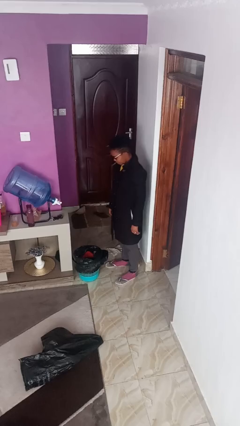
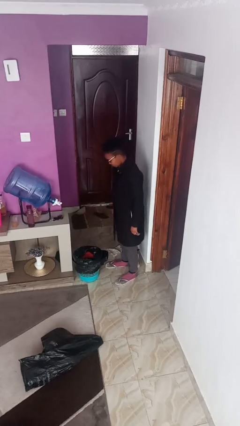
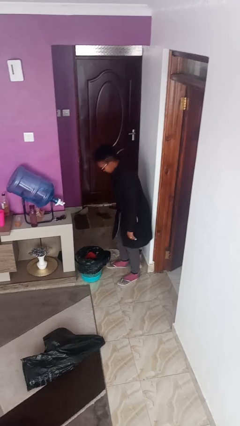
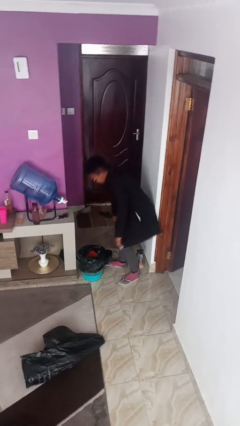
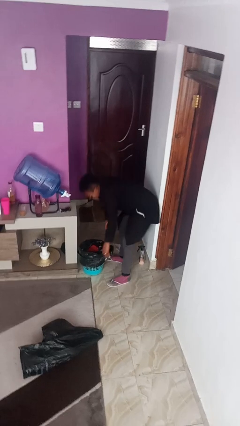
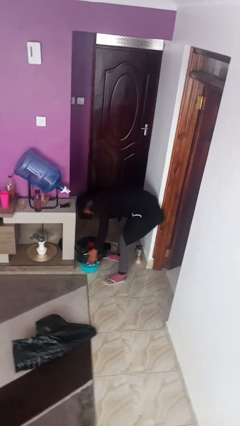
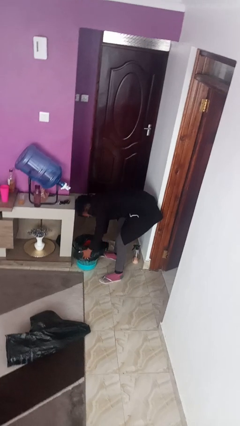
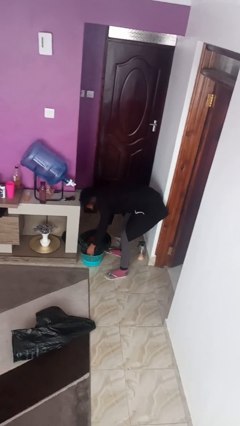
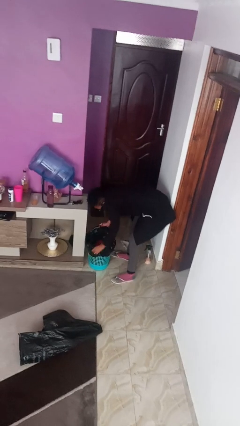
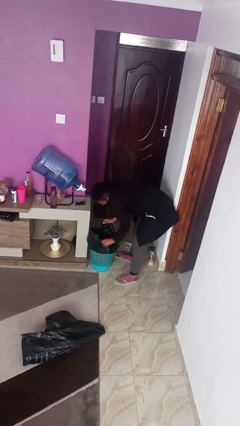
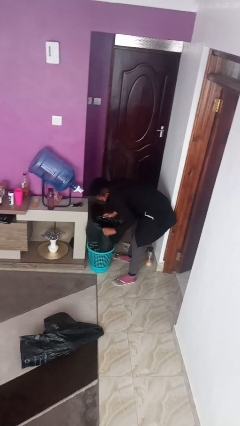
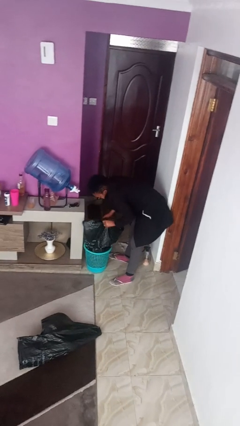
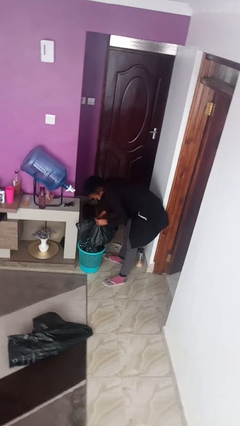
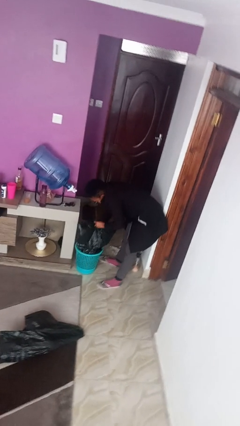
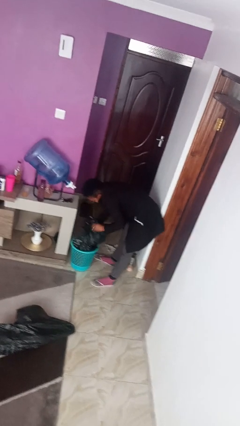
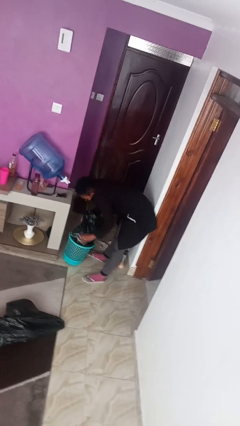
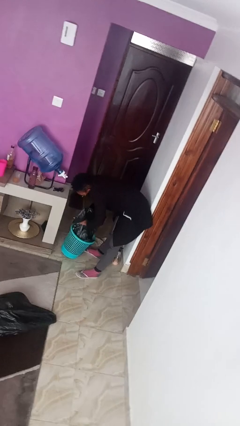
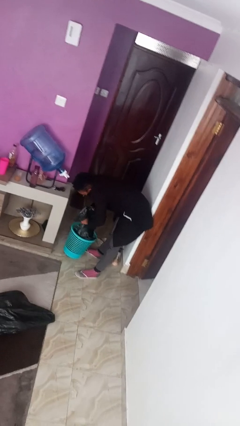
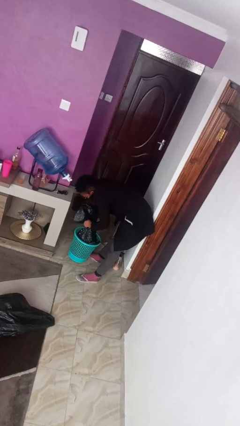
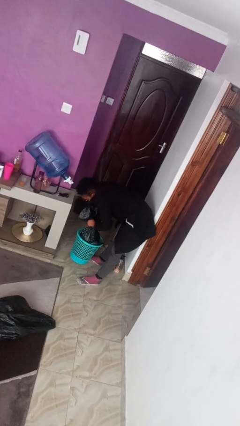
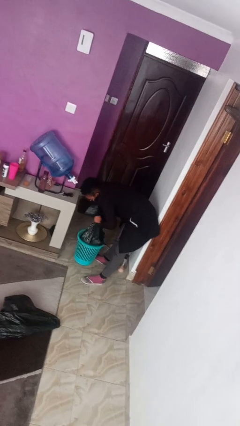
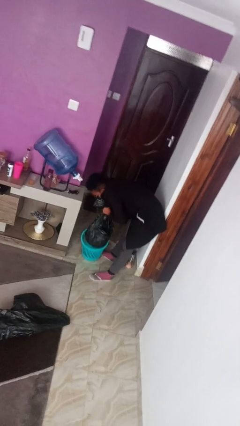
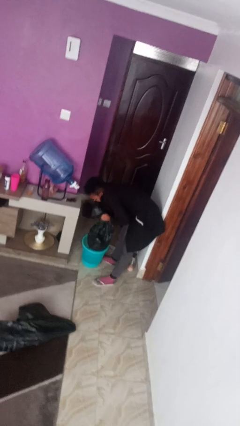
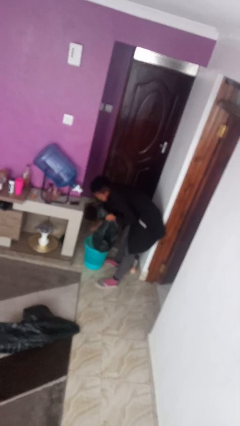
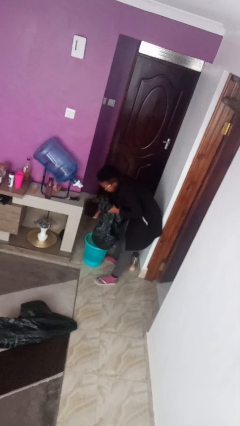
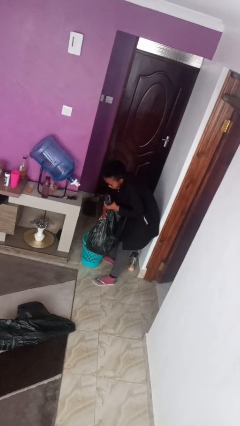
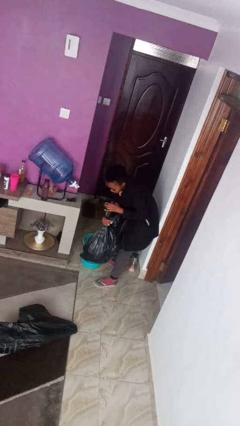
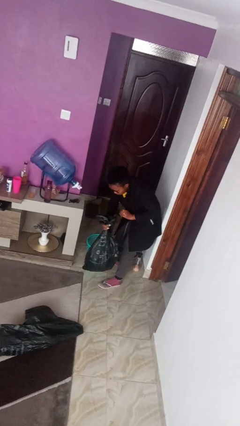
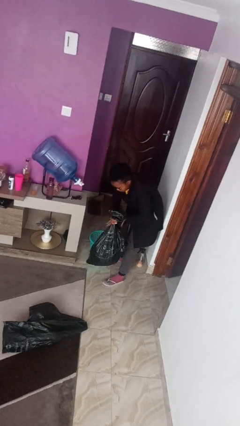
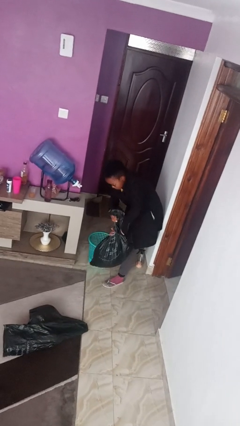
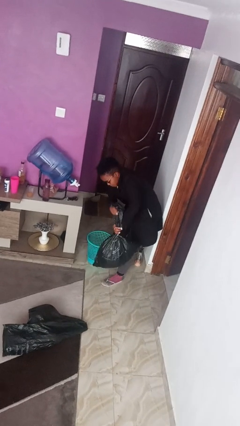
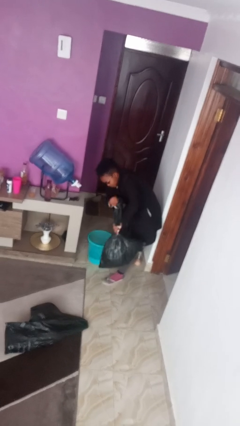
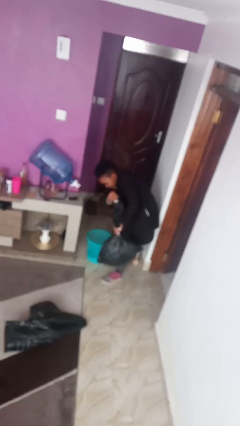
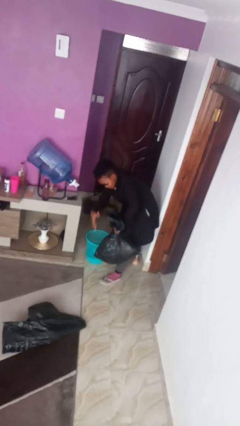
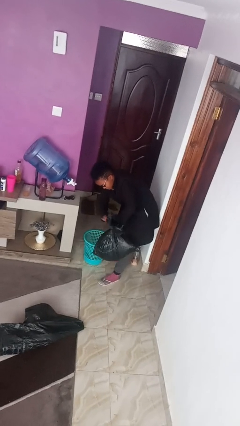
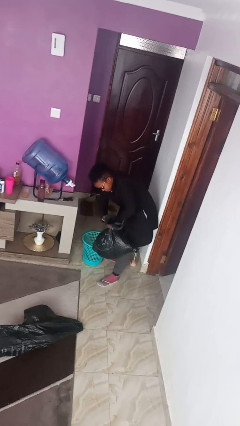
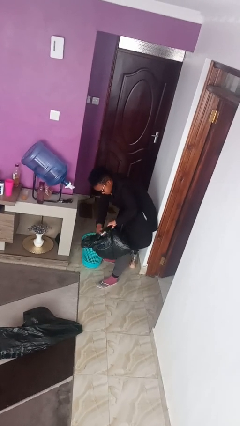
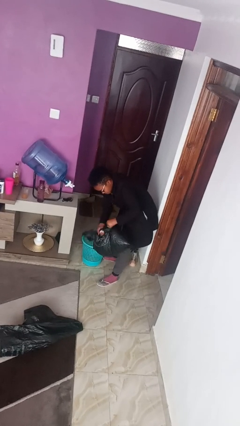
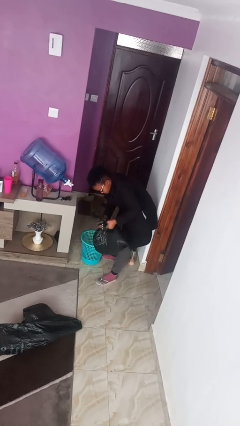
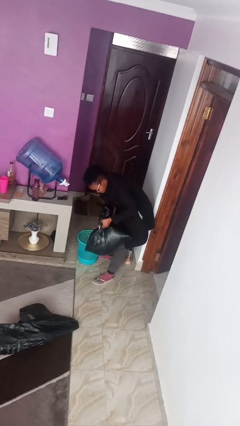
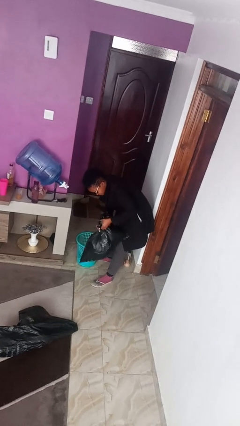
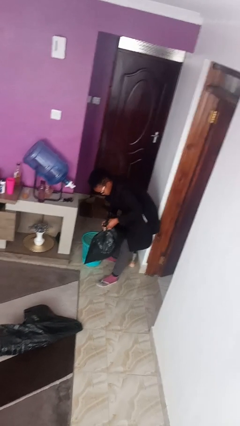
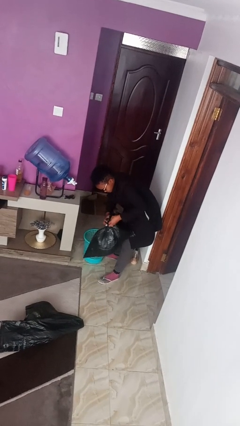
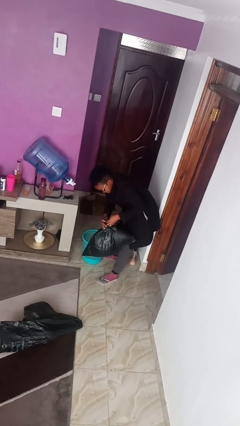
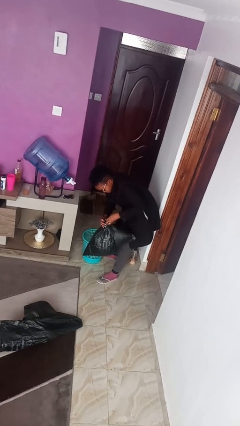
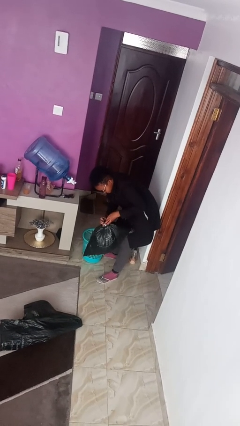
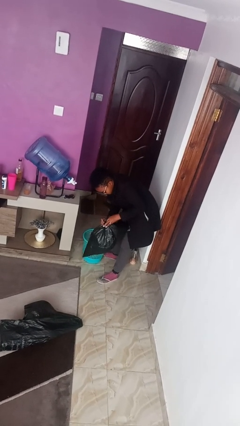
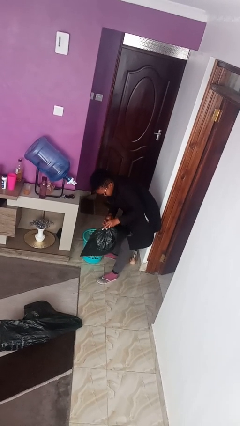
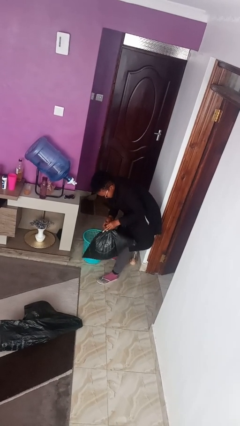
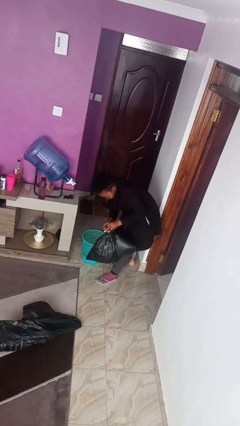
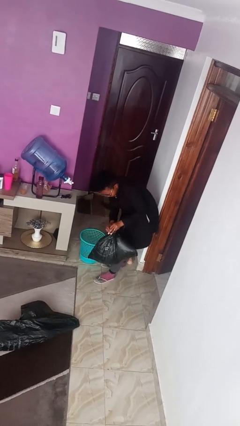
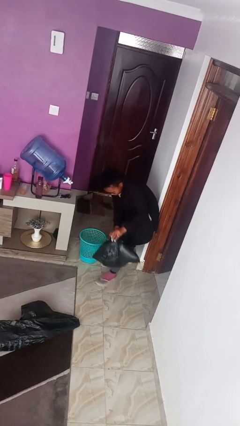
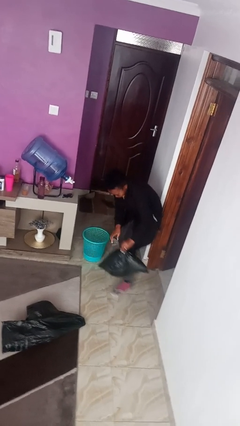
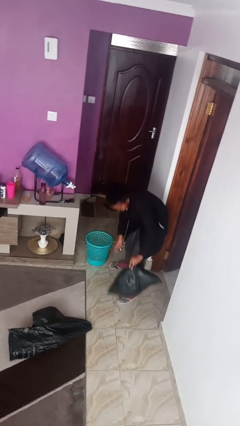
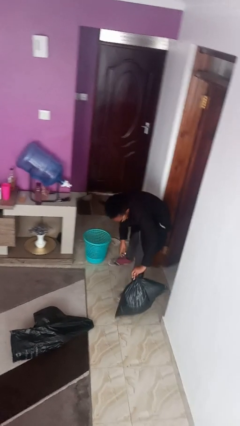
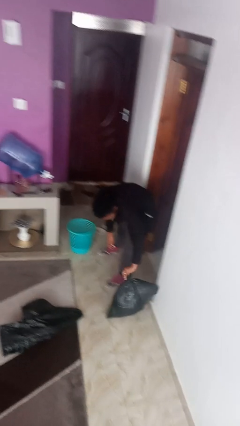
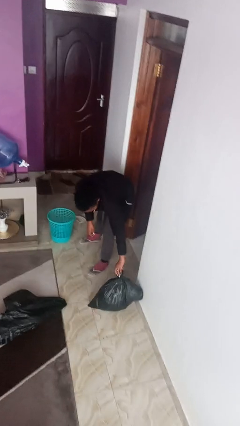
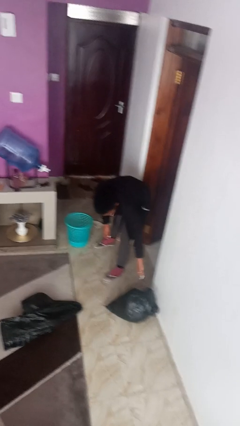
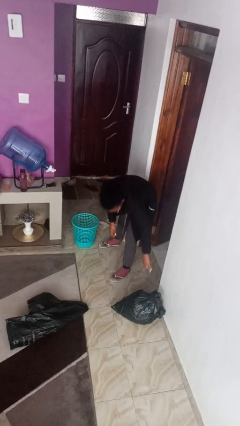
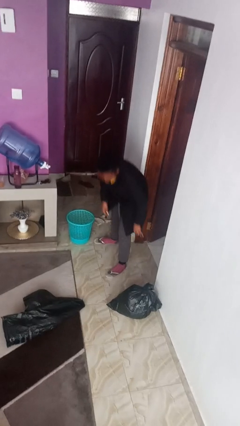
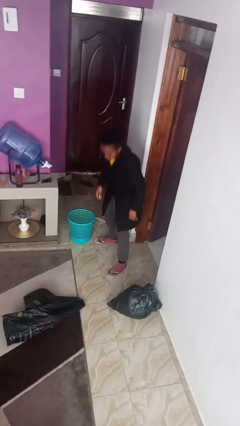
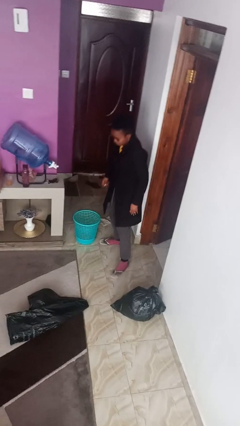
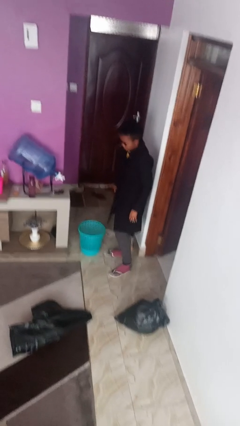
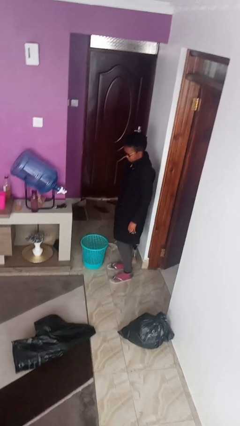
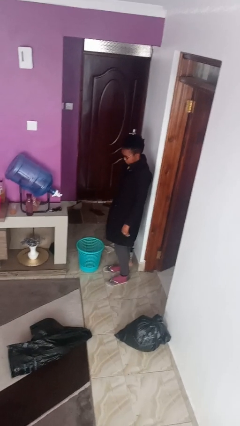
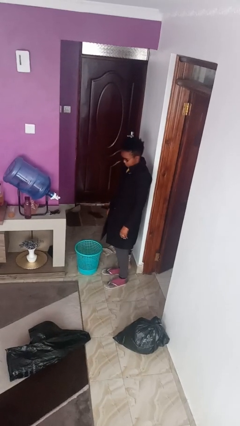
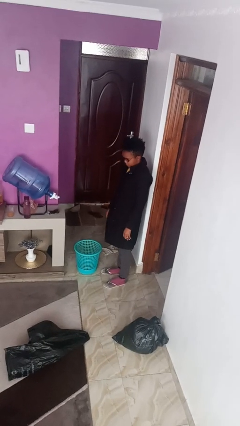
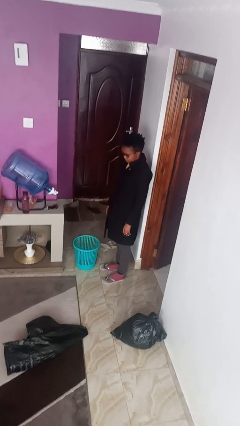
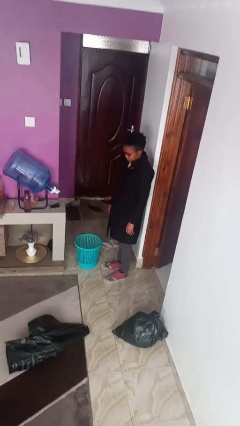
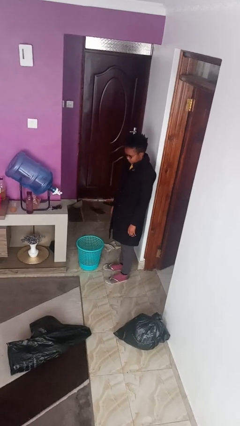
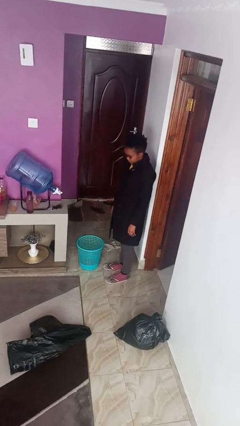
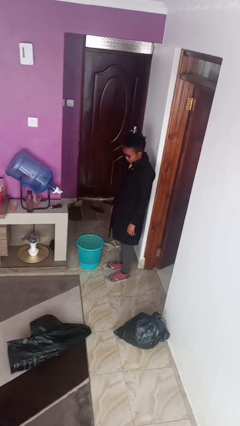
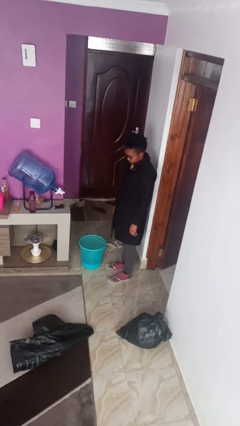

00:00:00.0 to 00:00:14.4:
person removes trashbag from trashcan

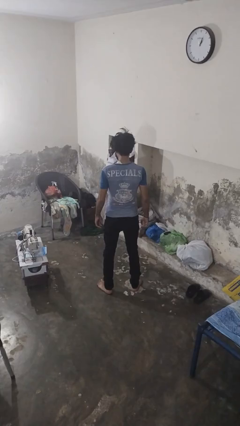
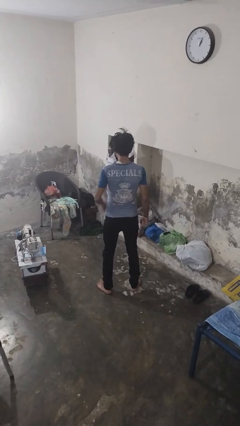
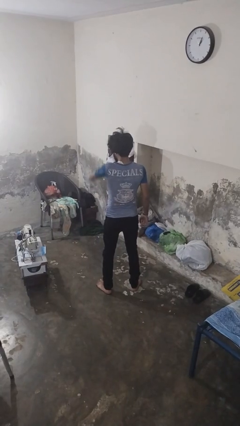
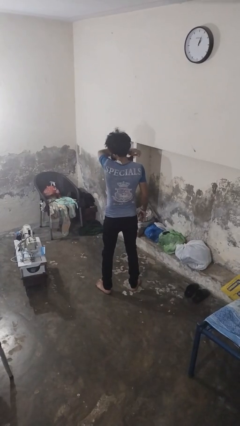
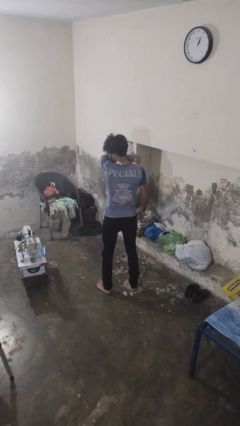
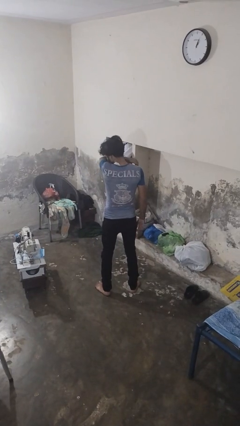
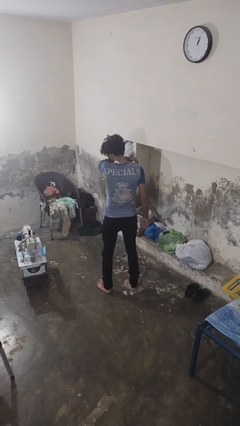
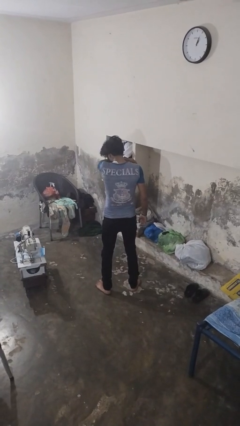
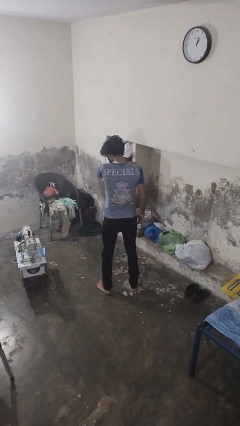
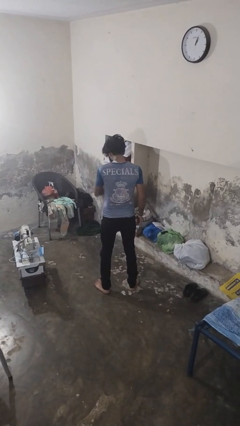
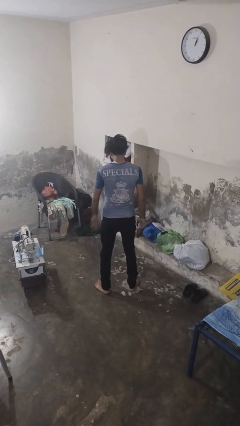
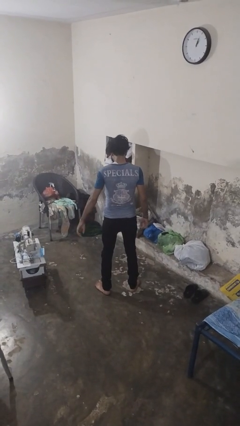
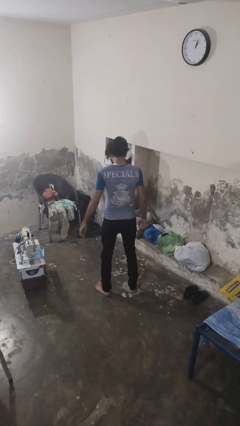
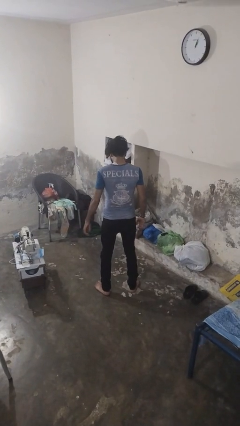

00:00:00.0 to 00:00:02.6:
person sneezes into arm

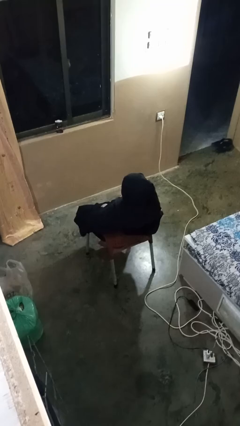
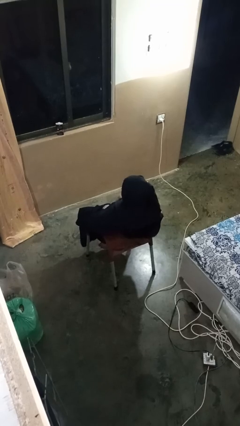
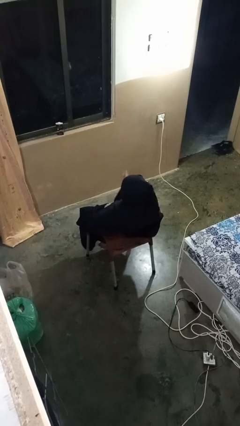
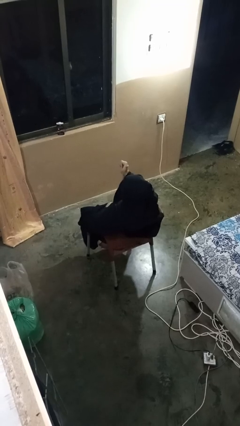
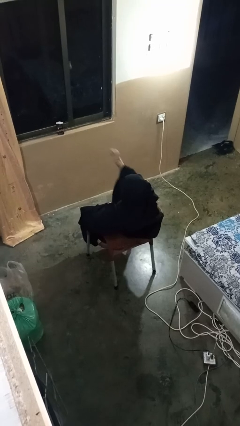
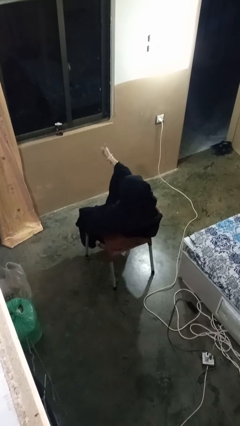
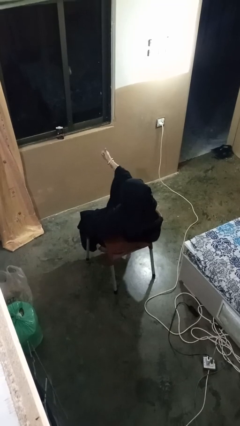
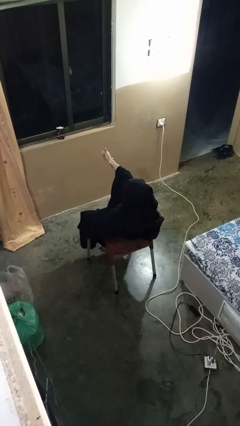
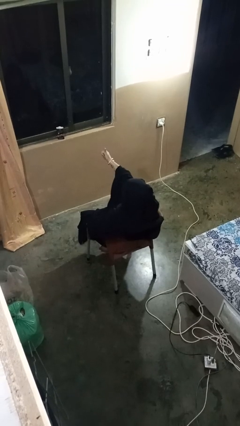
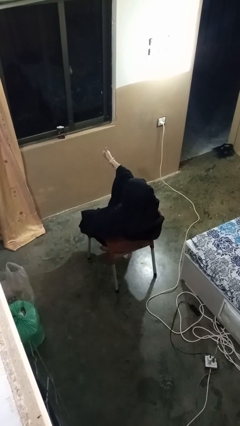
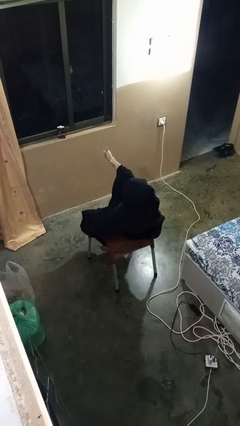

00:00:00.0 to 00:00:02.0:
person gestures thumbs up
